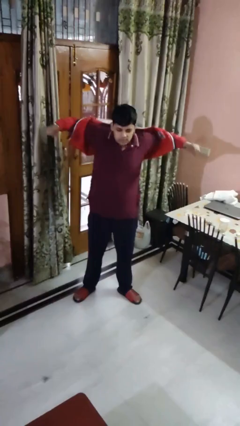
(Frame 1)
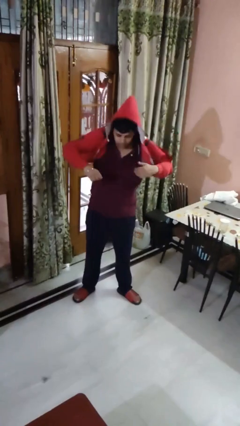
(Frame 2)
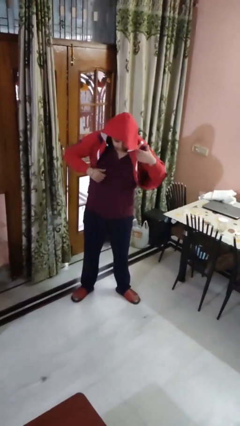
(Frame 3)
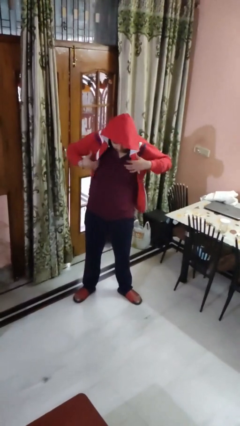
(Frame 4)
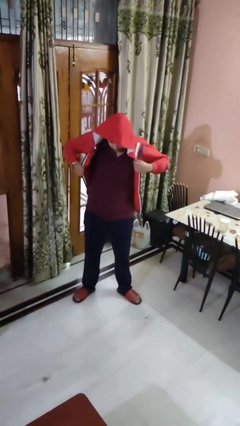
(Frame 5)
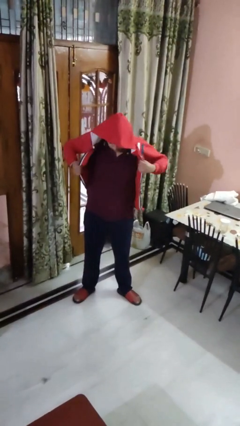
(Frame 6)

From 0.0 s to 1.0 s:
person puts on hoodie

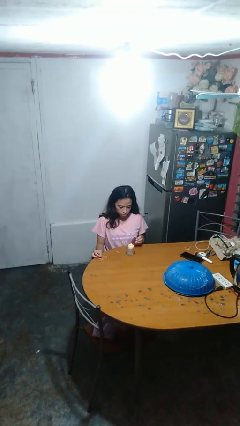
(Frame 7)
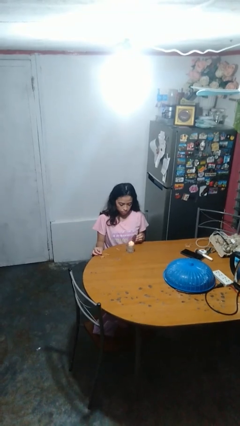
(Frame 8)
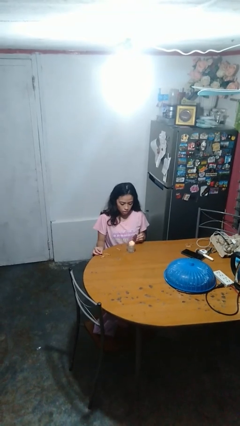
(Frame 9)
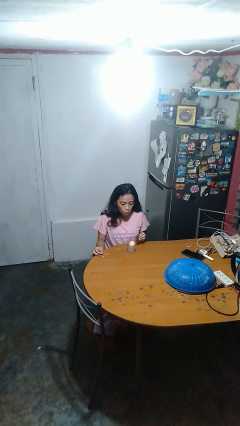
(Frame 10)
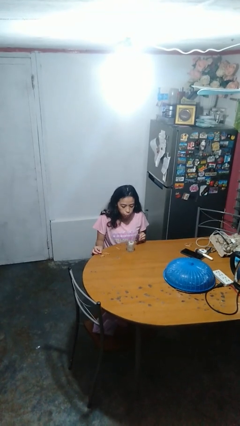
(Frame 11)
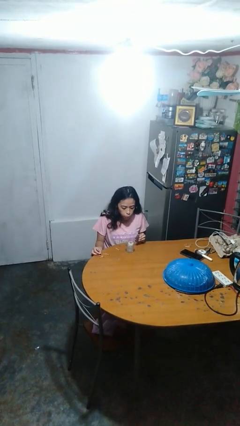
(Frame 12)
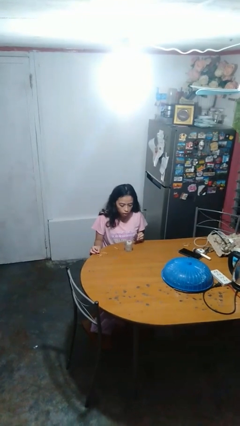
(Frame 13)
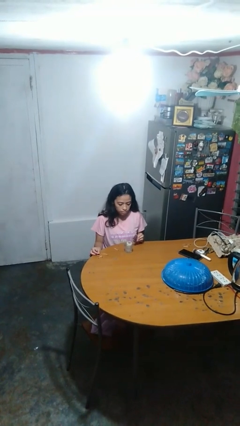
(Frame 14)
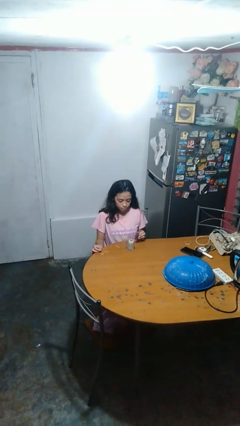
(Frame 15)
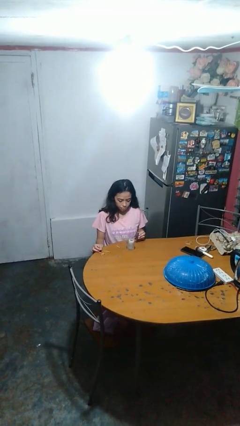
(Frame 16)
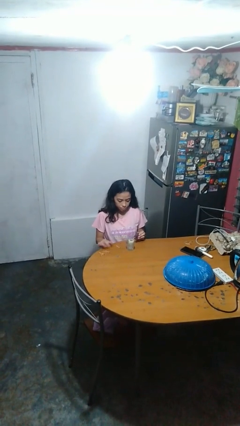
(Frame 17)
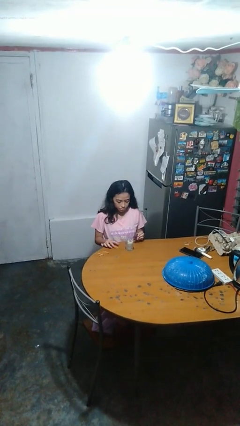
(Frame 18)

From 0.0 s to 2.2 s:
person extinguishes candle

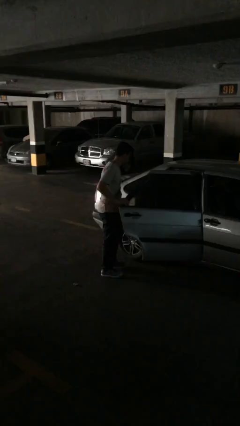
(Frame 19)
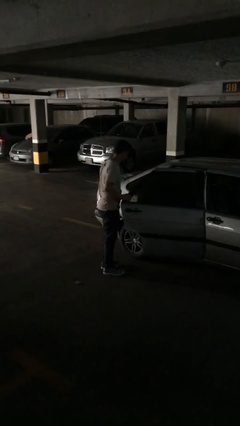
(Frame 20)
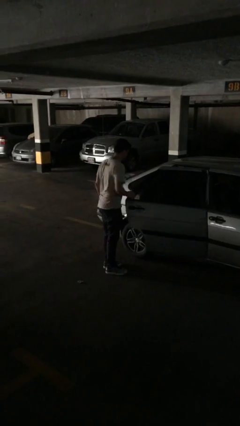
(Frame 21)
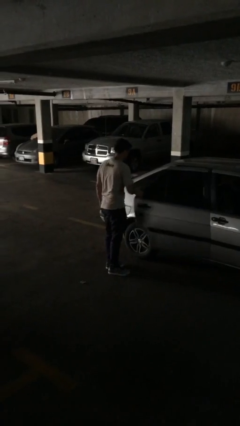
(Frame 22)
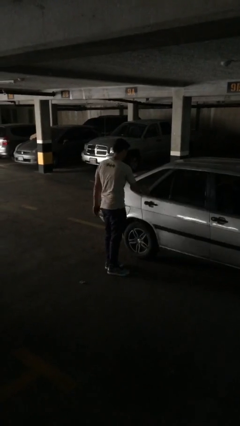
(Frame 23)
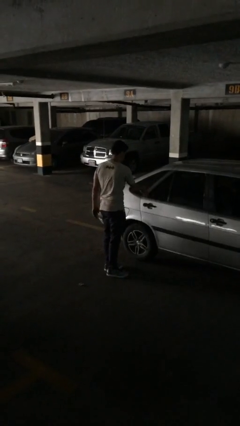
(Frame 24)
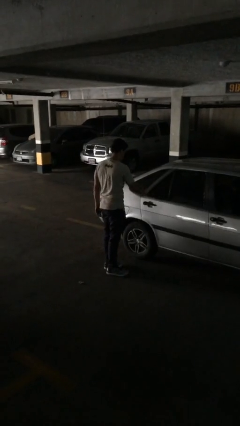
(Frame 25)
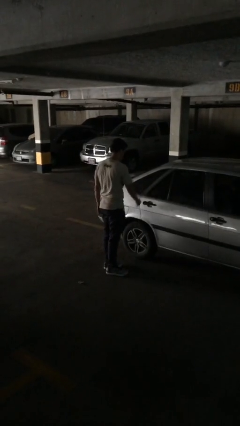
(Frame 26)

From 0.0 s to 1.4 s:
person closes car door

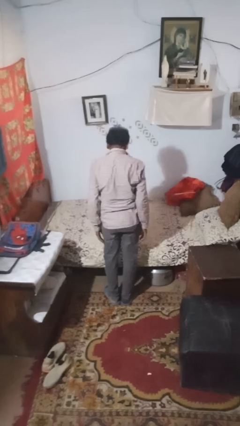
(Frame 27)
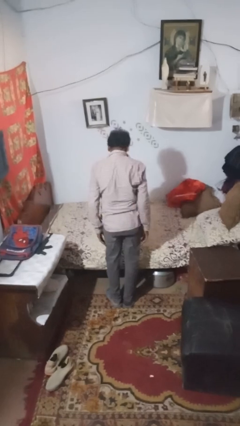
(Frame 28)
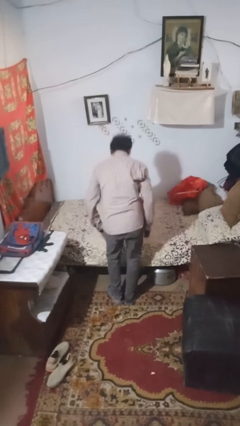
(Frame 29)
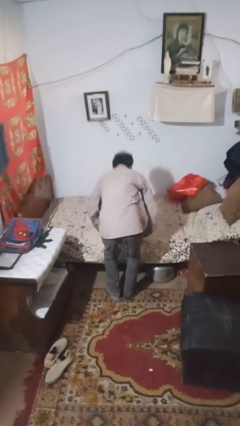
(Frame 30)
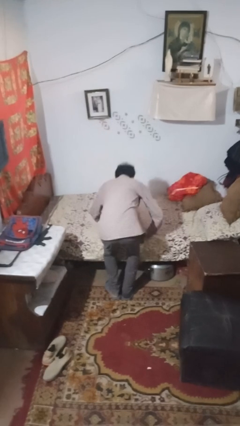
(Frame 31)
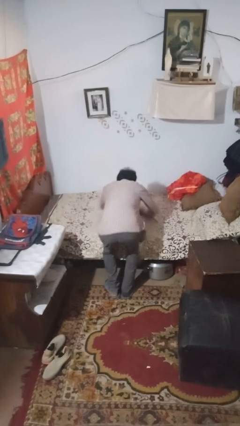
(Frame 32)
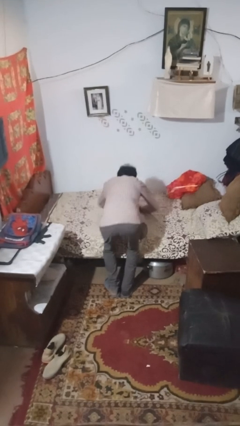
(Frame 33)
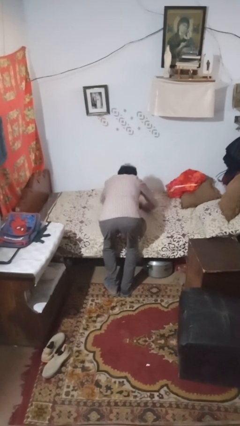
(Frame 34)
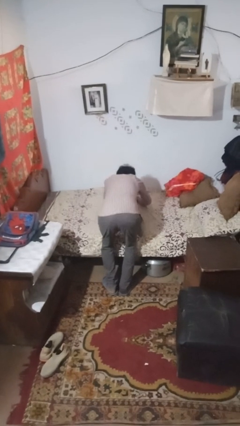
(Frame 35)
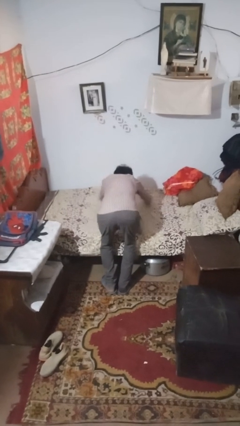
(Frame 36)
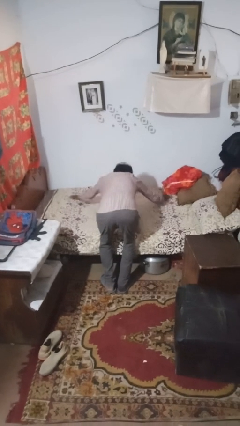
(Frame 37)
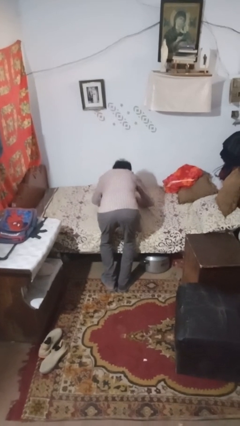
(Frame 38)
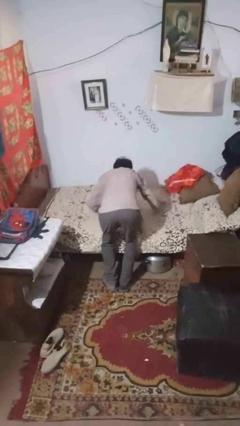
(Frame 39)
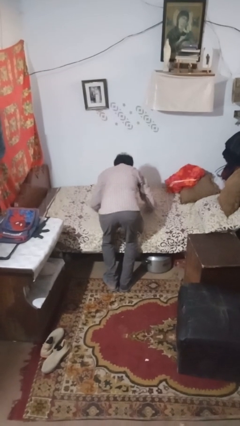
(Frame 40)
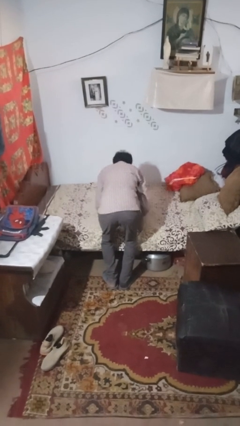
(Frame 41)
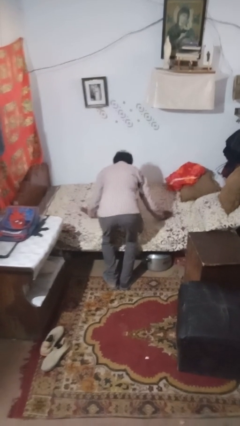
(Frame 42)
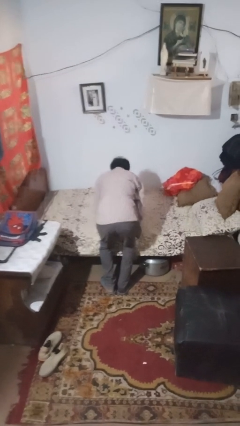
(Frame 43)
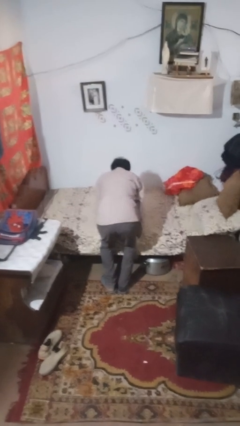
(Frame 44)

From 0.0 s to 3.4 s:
person makes bed

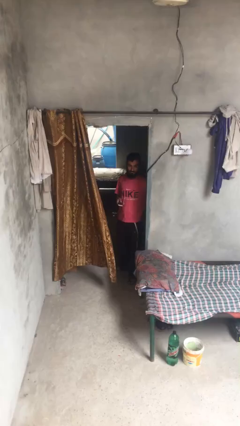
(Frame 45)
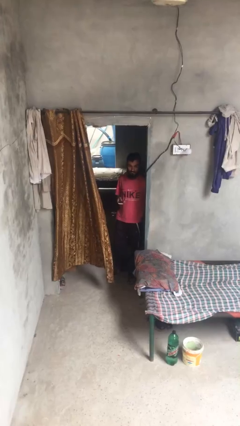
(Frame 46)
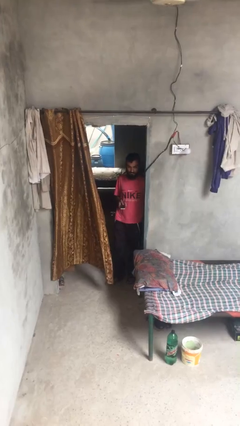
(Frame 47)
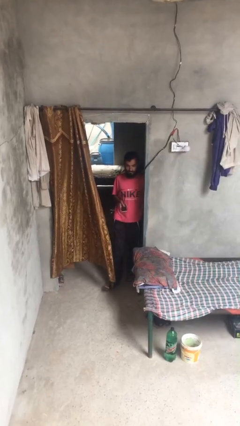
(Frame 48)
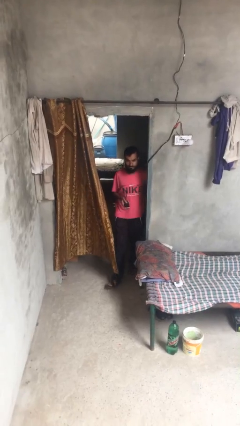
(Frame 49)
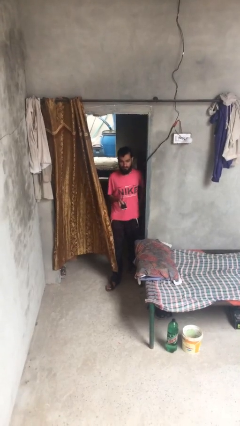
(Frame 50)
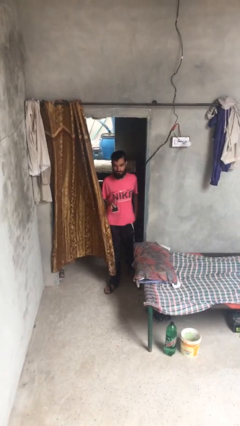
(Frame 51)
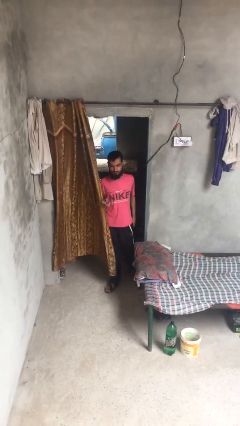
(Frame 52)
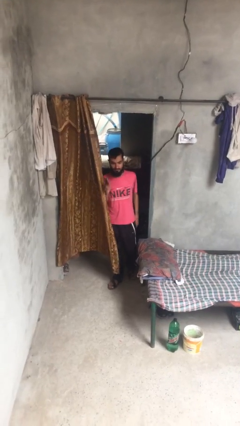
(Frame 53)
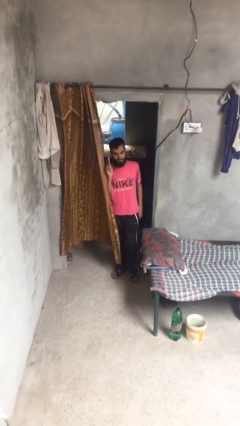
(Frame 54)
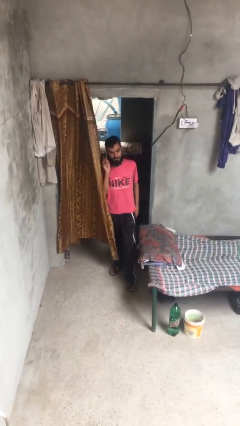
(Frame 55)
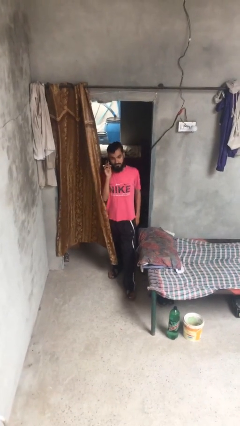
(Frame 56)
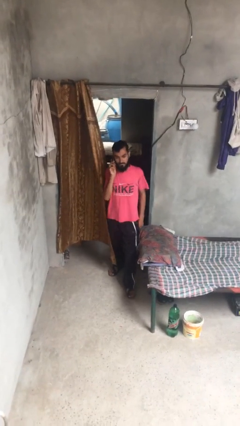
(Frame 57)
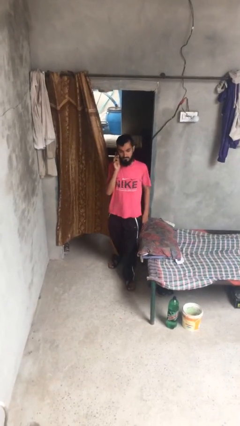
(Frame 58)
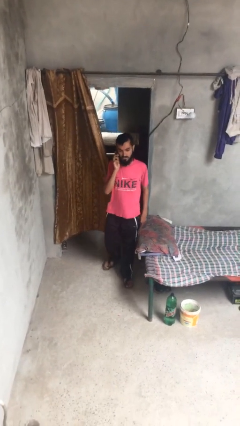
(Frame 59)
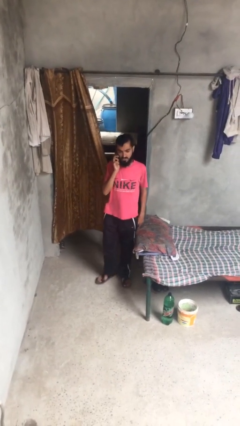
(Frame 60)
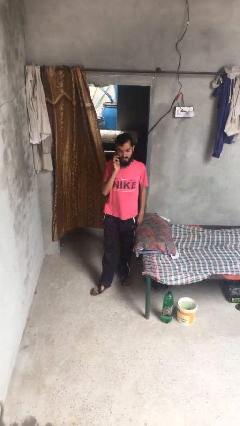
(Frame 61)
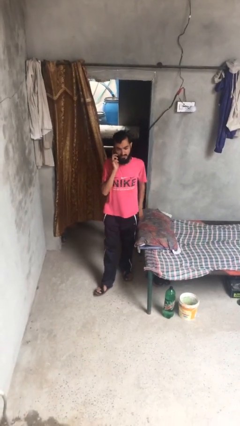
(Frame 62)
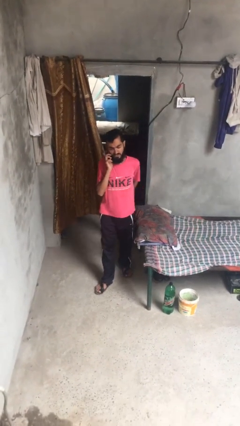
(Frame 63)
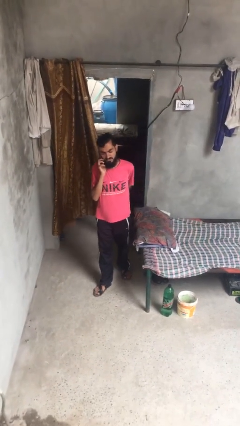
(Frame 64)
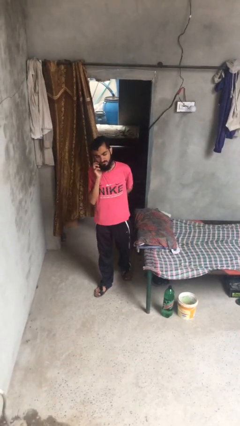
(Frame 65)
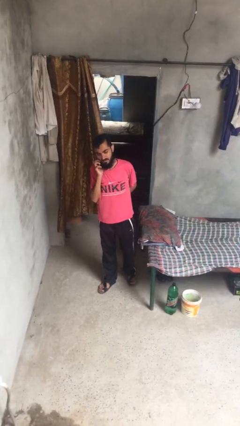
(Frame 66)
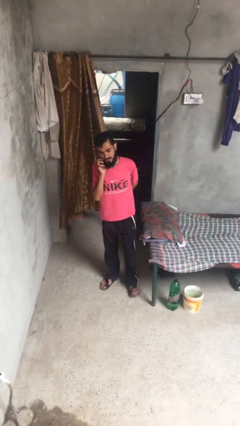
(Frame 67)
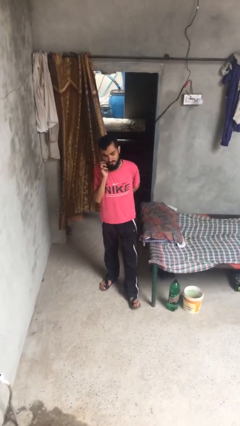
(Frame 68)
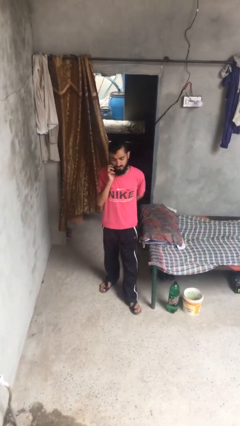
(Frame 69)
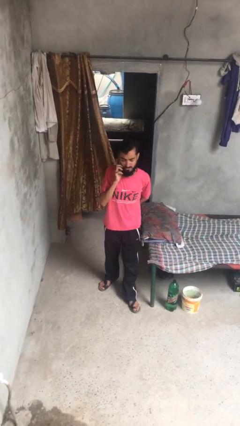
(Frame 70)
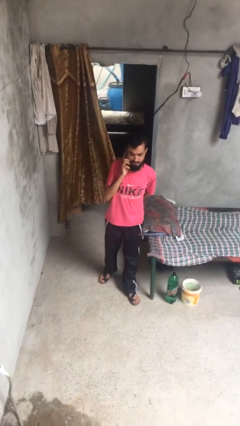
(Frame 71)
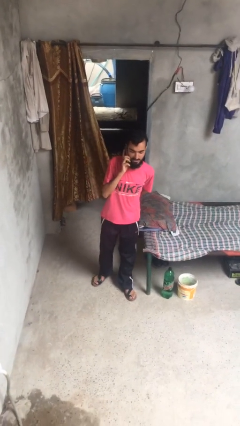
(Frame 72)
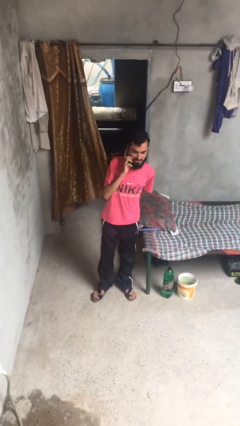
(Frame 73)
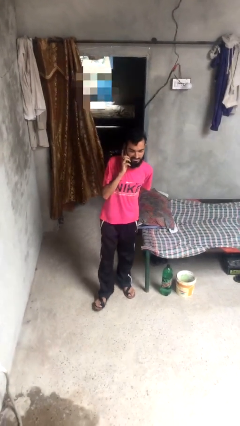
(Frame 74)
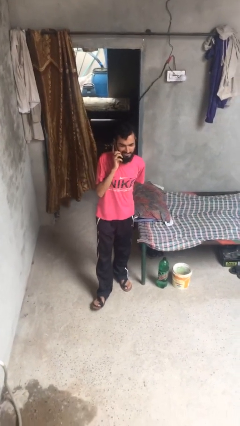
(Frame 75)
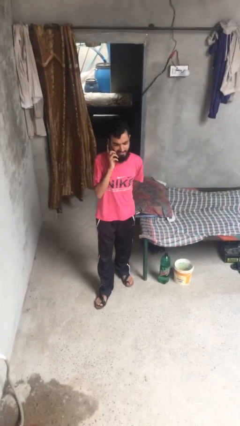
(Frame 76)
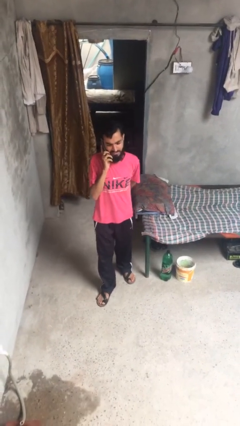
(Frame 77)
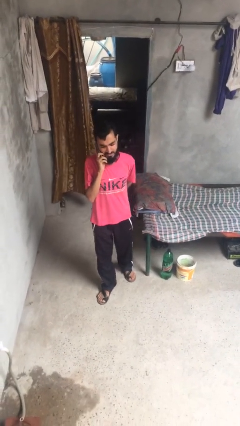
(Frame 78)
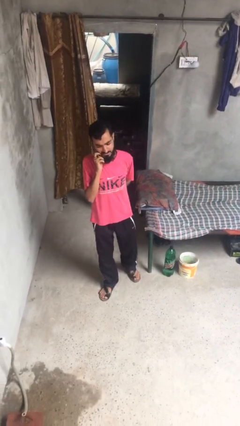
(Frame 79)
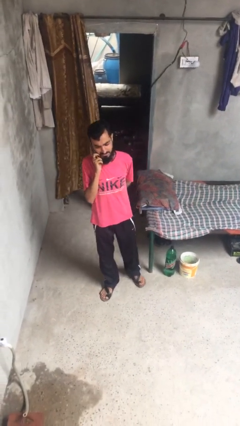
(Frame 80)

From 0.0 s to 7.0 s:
person enters scene through structure

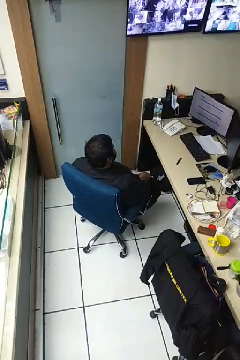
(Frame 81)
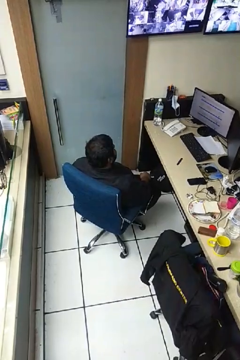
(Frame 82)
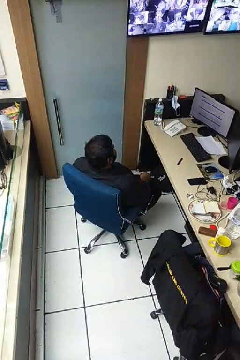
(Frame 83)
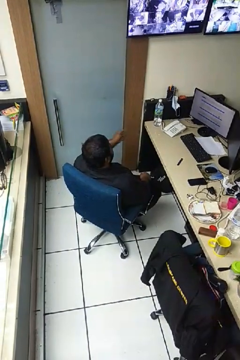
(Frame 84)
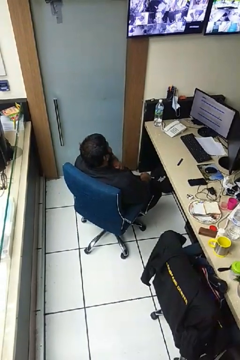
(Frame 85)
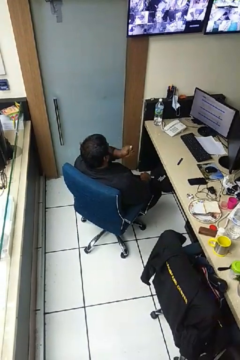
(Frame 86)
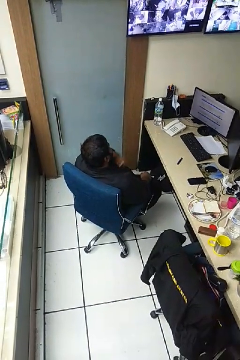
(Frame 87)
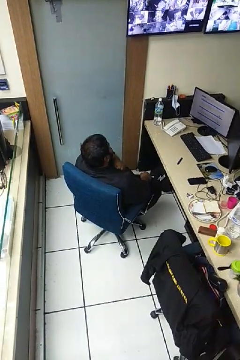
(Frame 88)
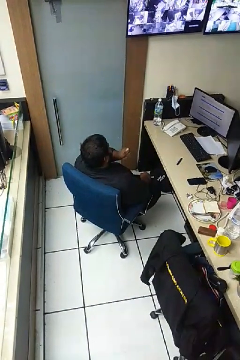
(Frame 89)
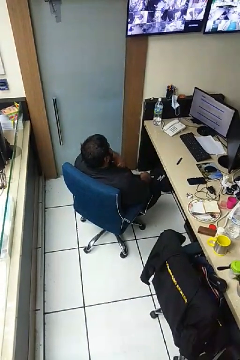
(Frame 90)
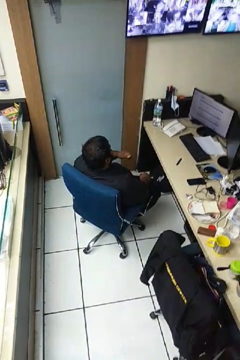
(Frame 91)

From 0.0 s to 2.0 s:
person drums on chest

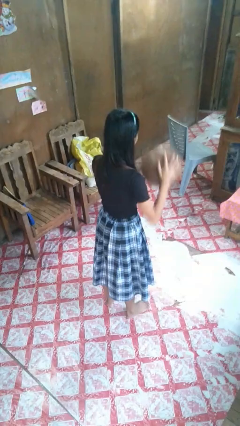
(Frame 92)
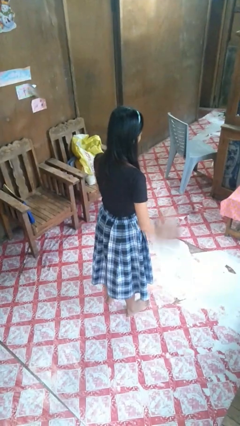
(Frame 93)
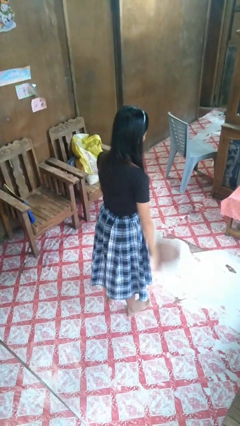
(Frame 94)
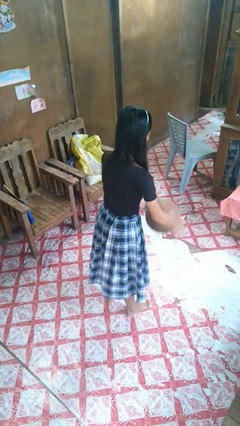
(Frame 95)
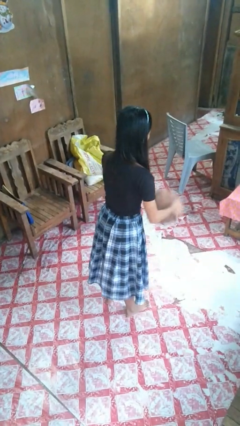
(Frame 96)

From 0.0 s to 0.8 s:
person bounces ball on floor
